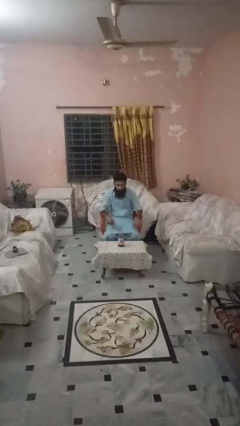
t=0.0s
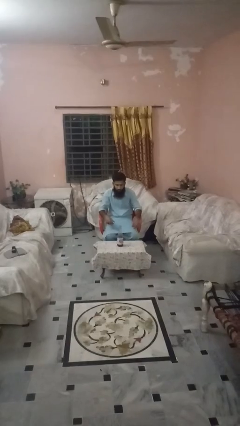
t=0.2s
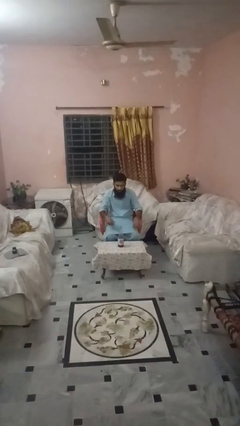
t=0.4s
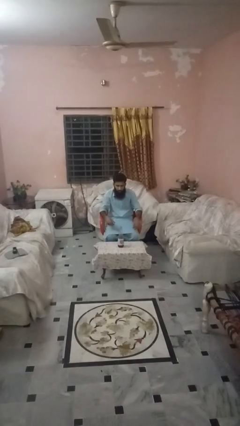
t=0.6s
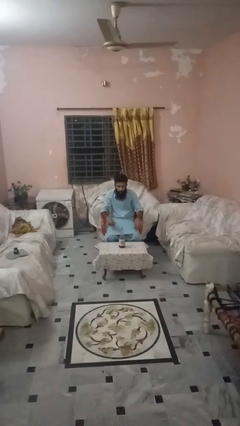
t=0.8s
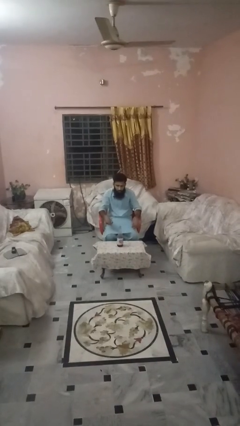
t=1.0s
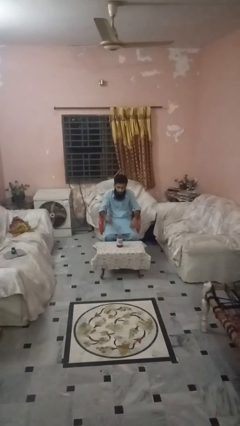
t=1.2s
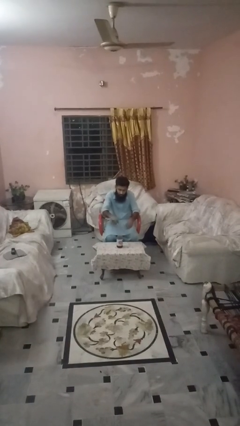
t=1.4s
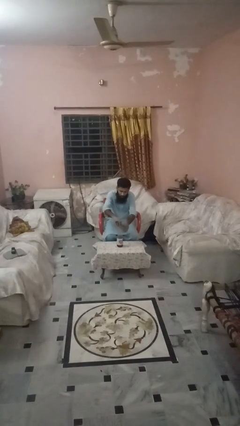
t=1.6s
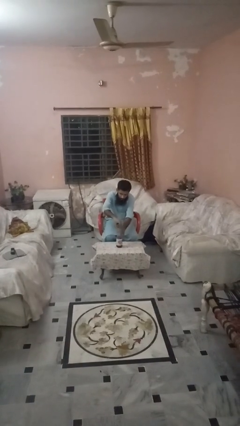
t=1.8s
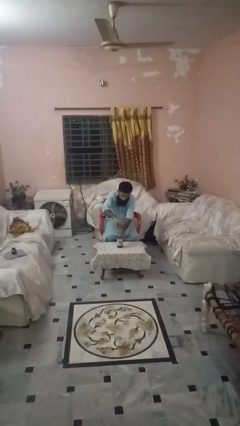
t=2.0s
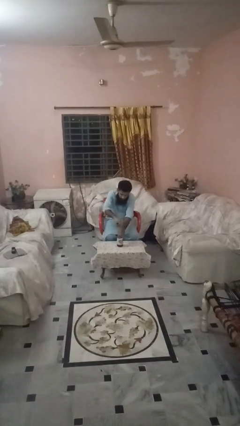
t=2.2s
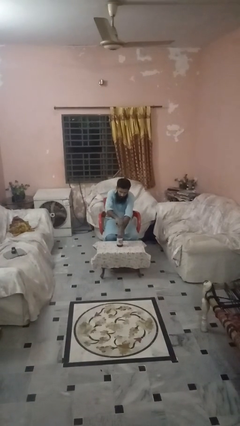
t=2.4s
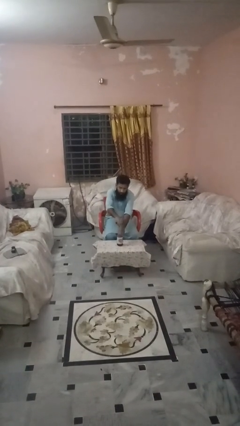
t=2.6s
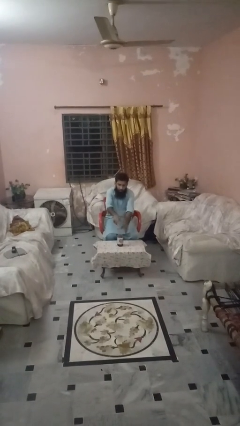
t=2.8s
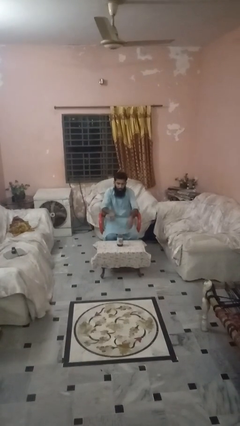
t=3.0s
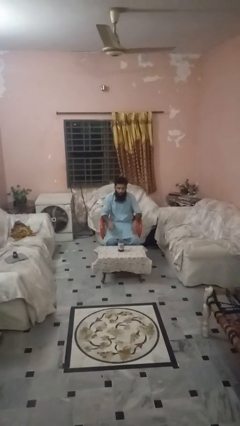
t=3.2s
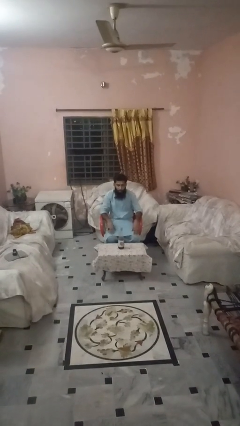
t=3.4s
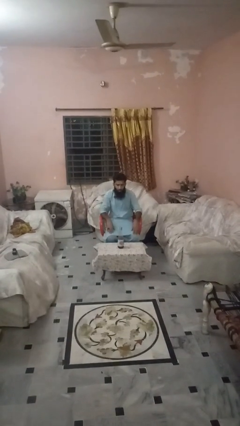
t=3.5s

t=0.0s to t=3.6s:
person screws lid to bottle

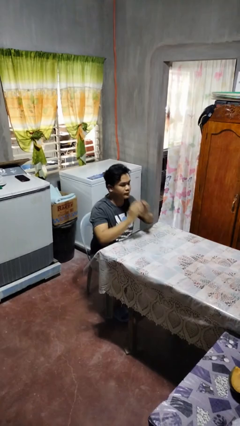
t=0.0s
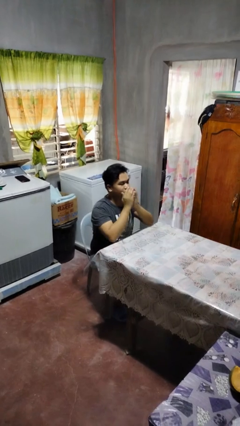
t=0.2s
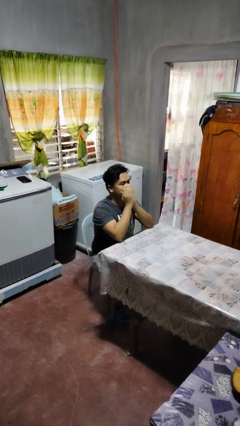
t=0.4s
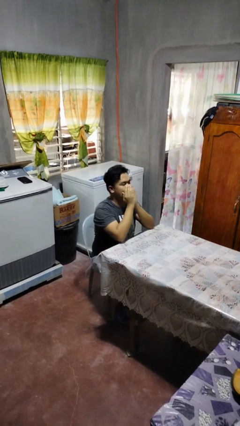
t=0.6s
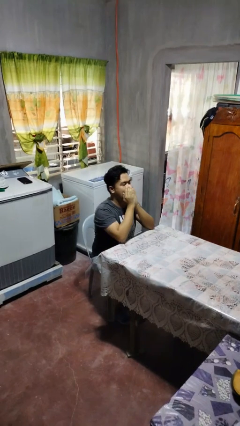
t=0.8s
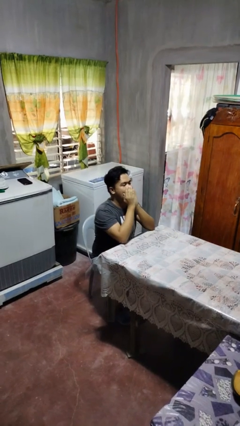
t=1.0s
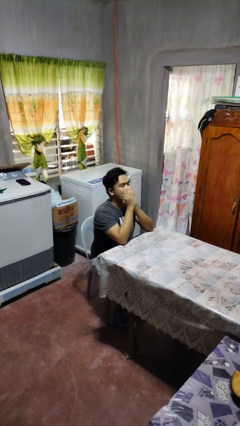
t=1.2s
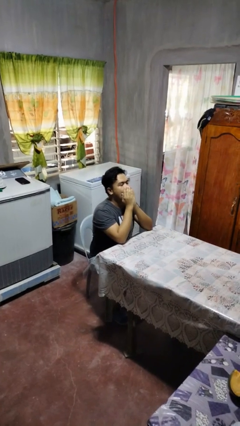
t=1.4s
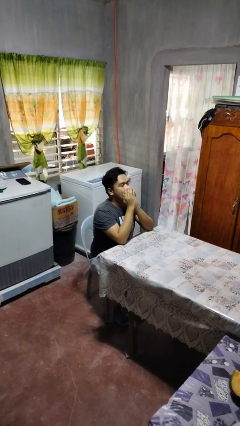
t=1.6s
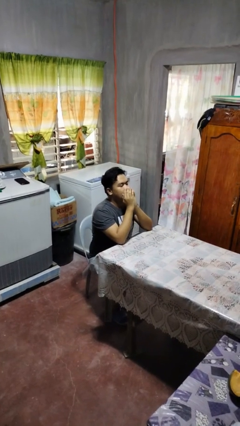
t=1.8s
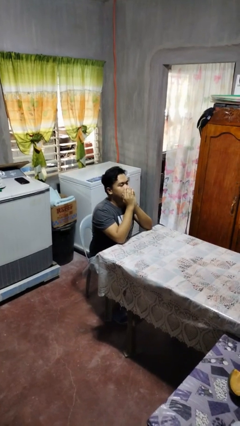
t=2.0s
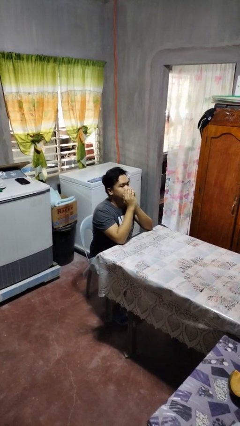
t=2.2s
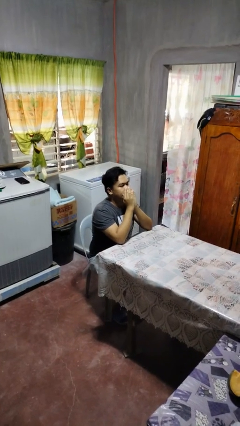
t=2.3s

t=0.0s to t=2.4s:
person yawns

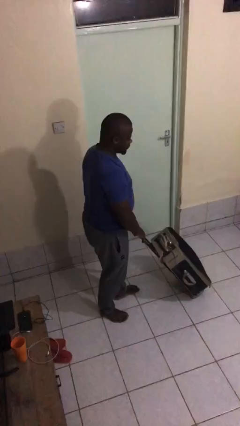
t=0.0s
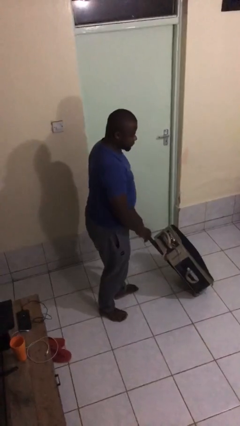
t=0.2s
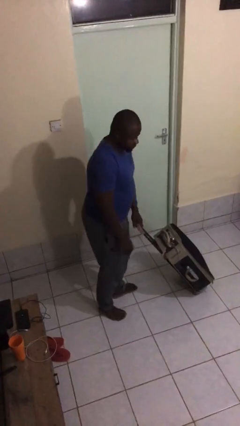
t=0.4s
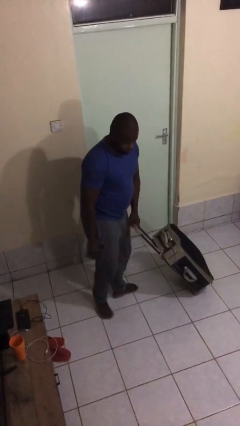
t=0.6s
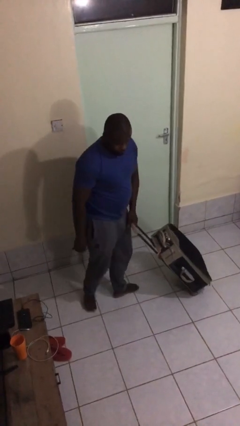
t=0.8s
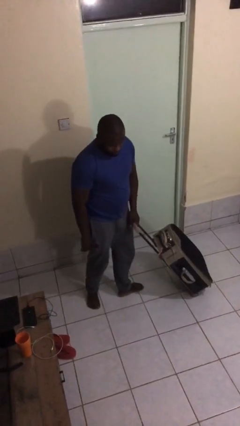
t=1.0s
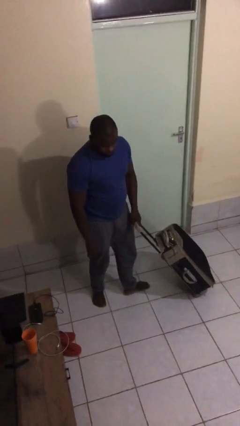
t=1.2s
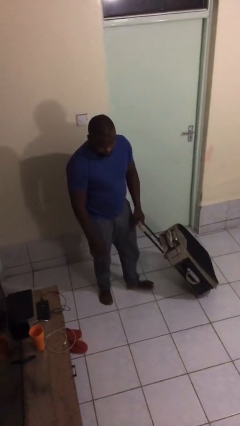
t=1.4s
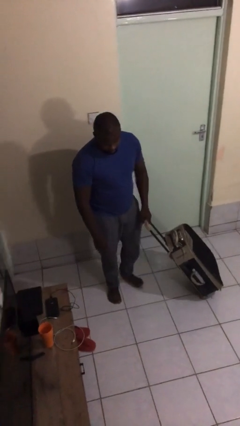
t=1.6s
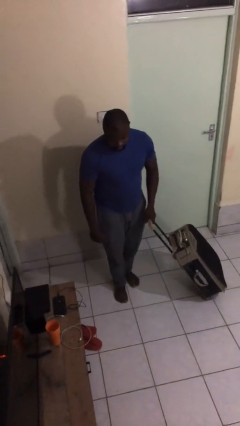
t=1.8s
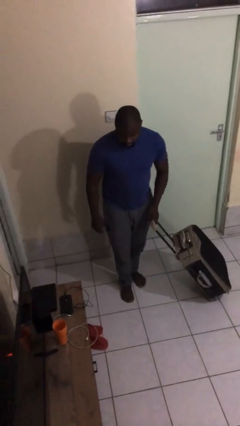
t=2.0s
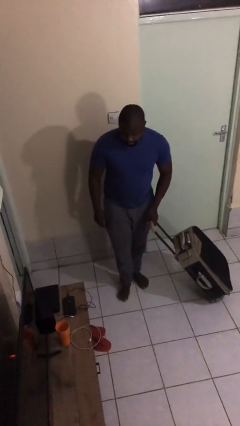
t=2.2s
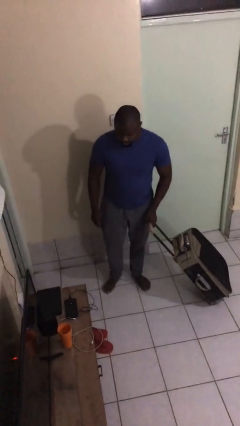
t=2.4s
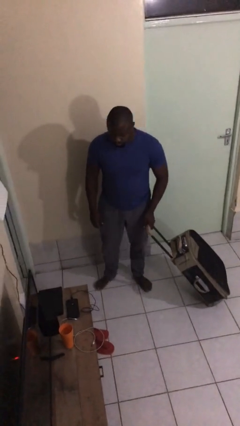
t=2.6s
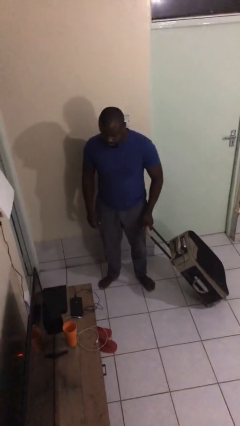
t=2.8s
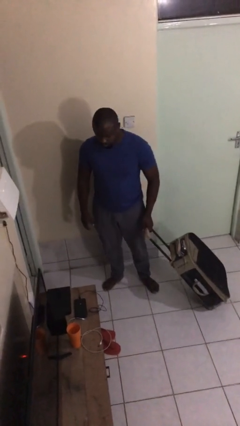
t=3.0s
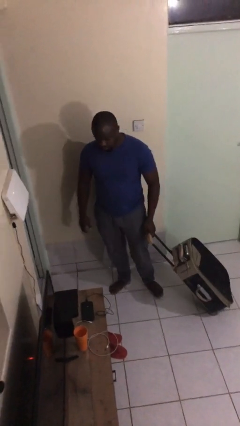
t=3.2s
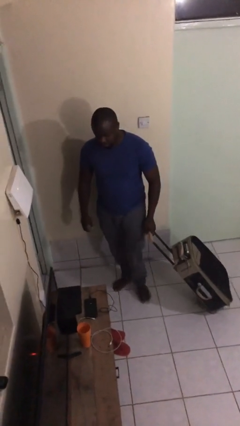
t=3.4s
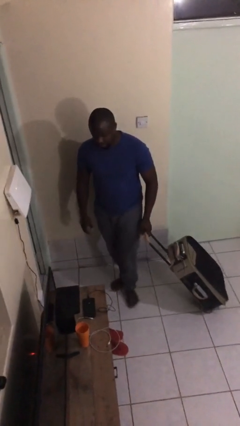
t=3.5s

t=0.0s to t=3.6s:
person pulls wheeled cart

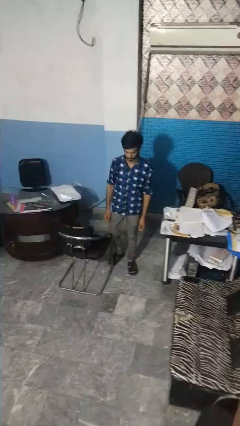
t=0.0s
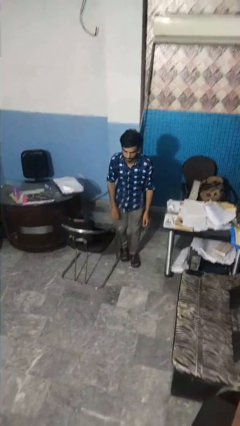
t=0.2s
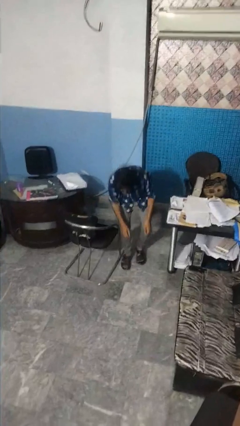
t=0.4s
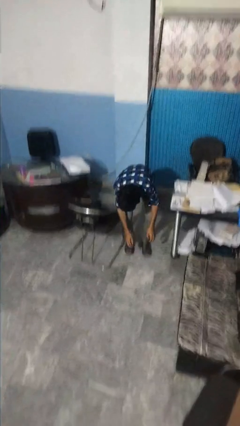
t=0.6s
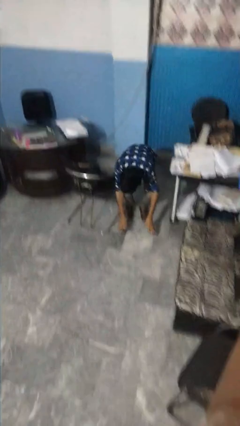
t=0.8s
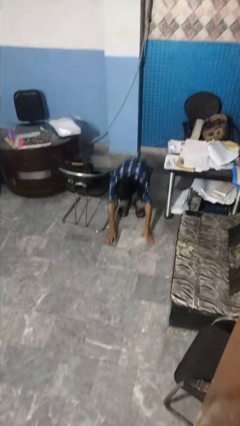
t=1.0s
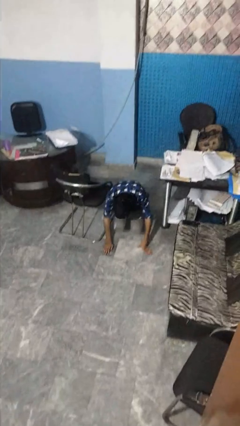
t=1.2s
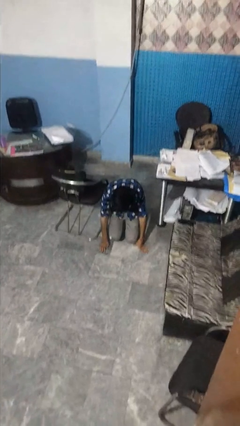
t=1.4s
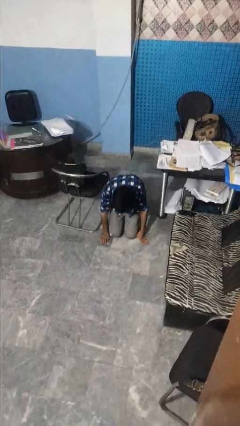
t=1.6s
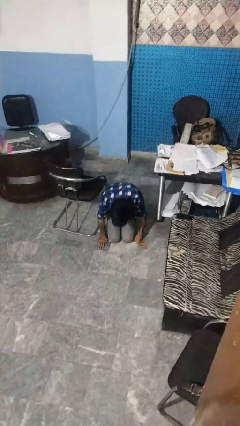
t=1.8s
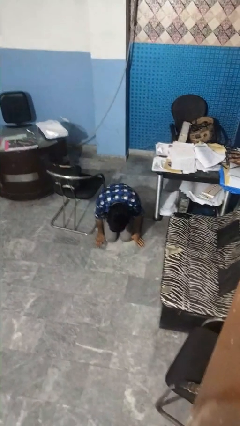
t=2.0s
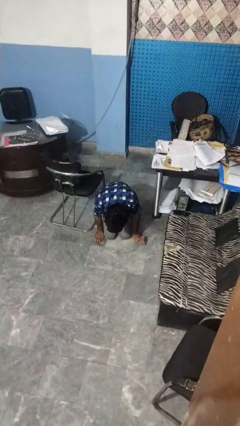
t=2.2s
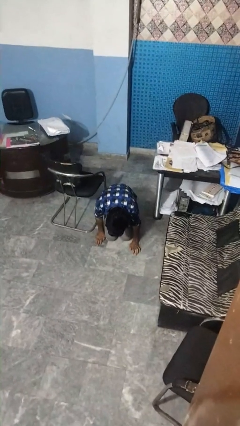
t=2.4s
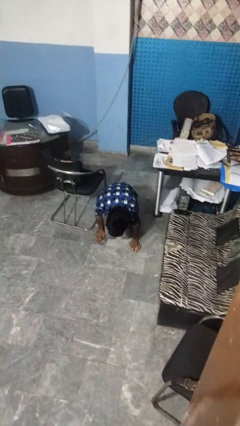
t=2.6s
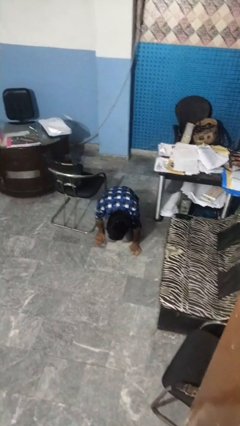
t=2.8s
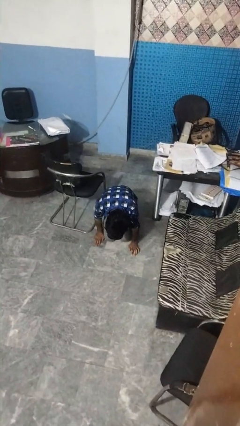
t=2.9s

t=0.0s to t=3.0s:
person trips on object on floor

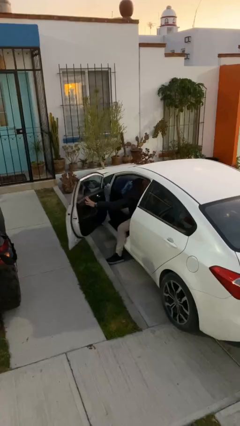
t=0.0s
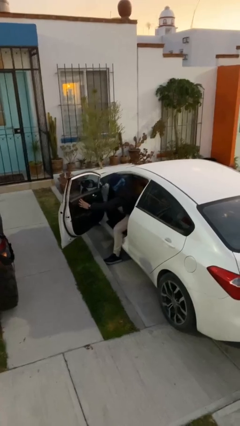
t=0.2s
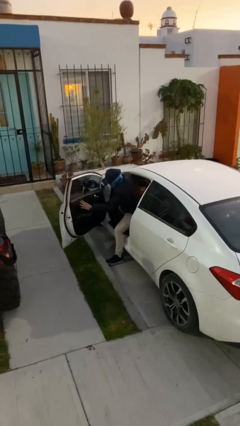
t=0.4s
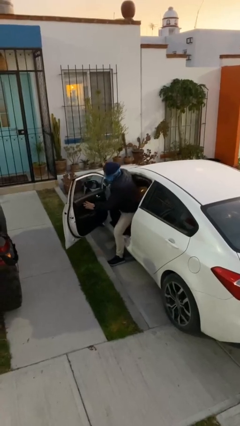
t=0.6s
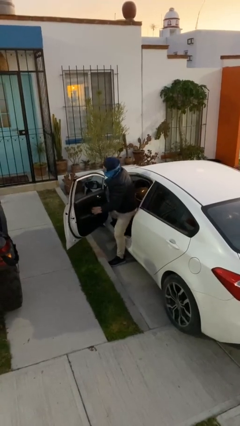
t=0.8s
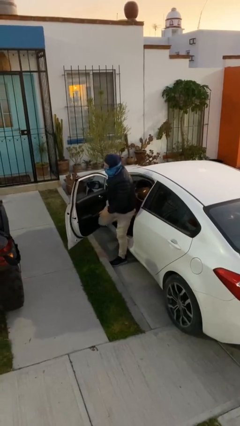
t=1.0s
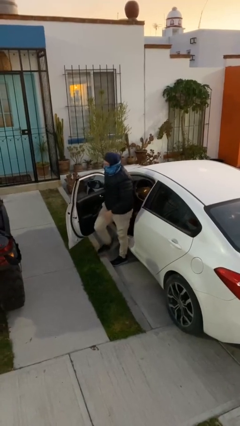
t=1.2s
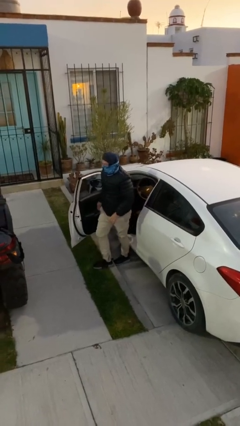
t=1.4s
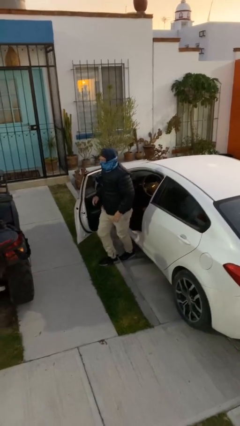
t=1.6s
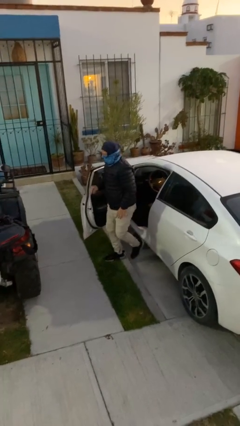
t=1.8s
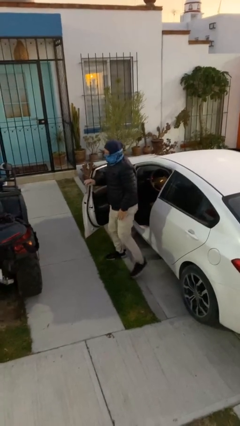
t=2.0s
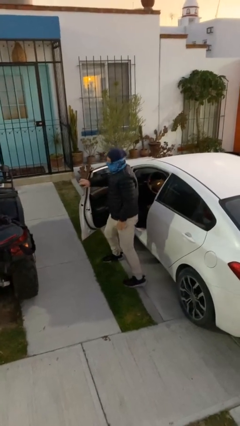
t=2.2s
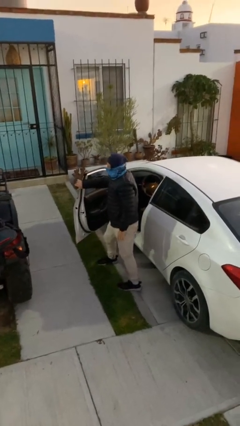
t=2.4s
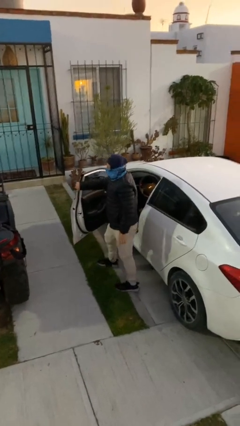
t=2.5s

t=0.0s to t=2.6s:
person exits car

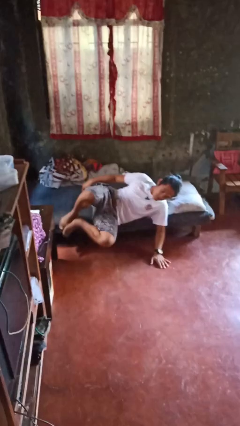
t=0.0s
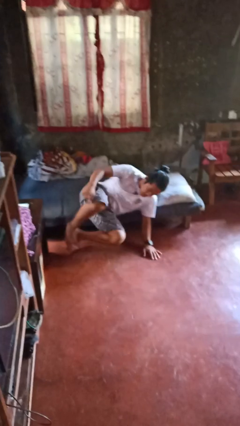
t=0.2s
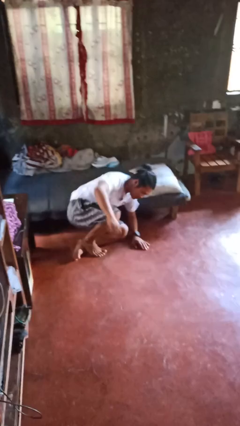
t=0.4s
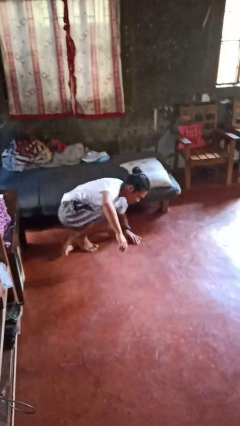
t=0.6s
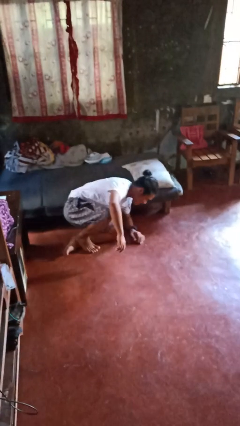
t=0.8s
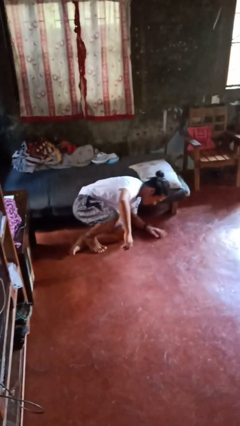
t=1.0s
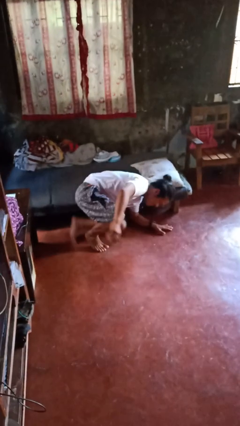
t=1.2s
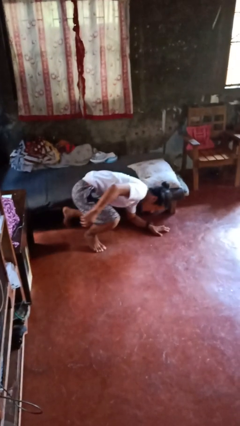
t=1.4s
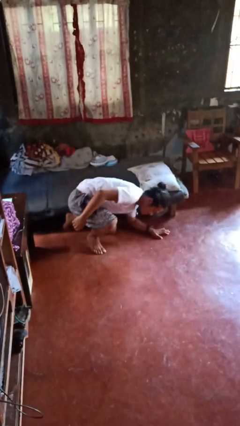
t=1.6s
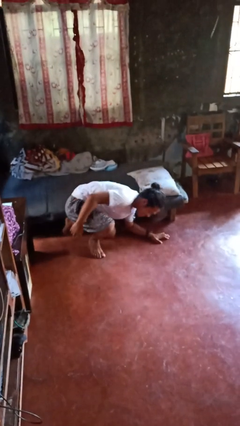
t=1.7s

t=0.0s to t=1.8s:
person falls from bed

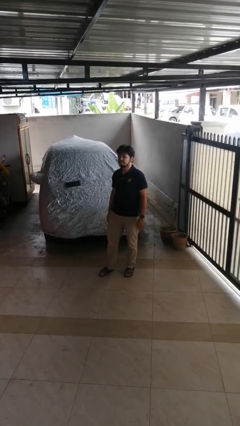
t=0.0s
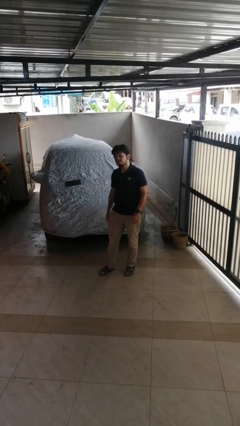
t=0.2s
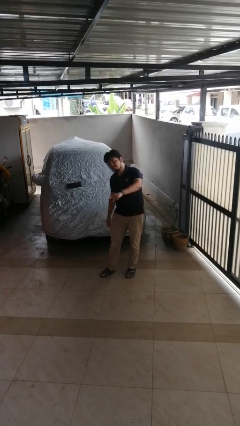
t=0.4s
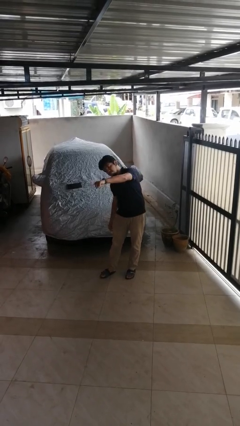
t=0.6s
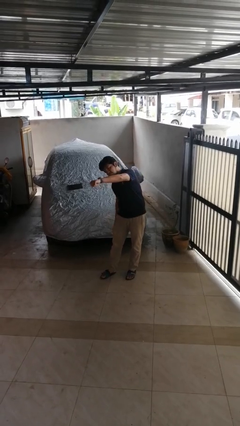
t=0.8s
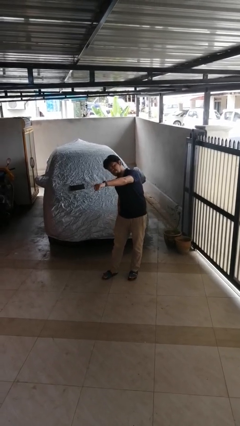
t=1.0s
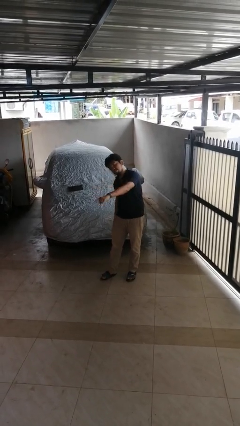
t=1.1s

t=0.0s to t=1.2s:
person points at person
